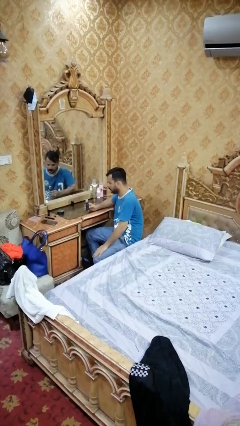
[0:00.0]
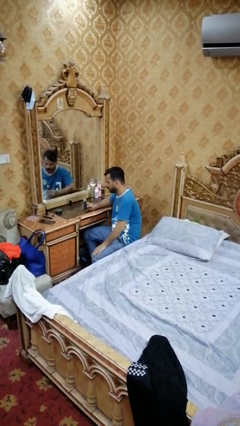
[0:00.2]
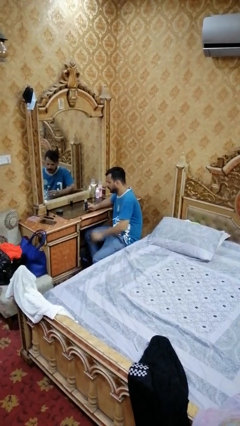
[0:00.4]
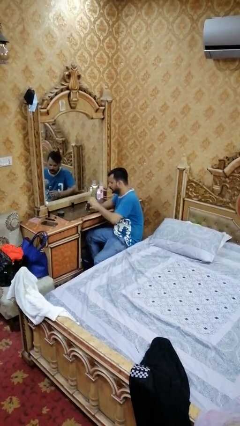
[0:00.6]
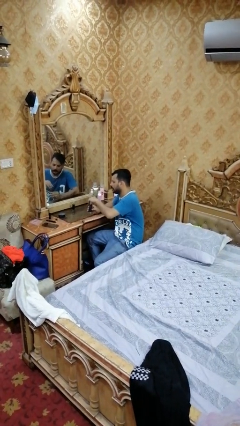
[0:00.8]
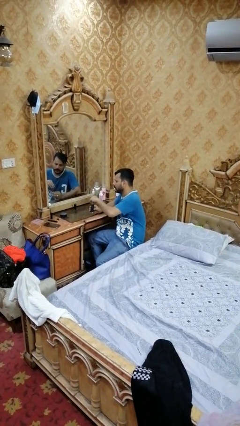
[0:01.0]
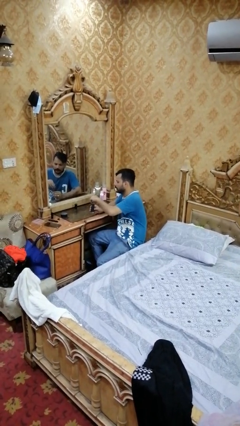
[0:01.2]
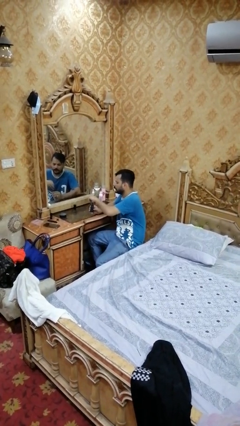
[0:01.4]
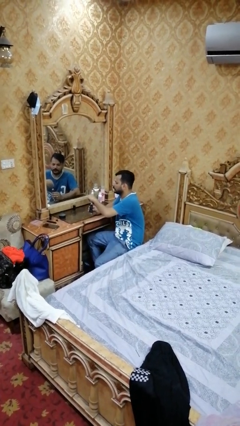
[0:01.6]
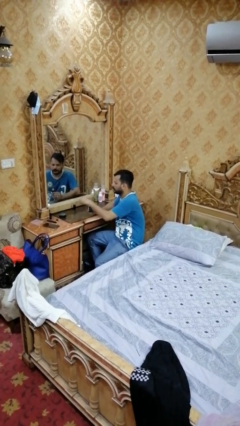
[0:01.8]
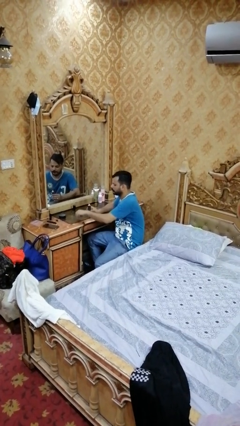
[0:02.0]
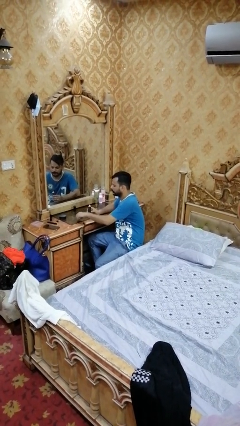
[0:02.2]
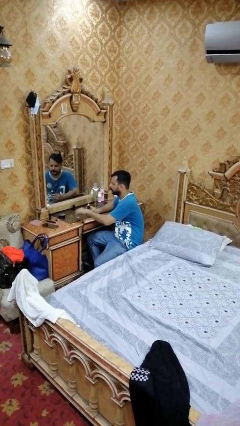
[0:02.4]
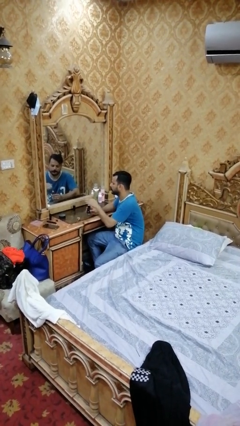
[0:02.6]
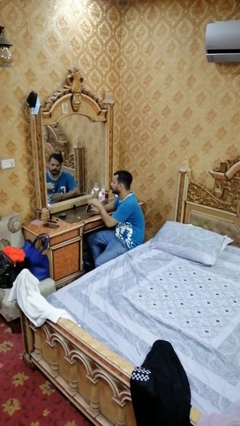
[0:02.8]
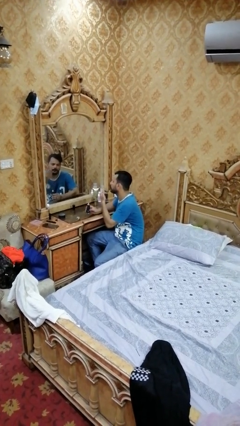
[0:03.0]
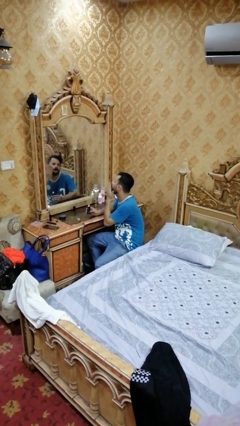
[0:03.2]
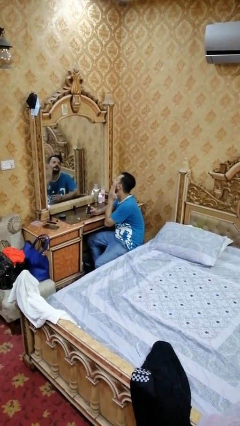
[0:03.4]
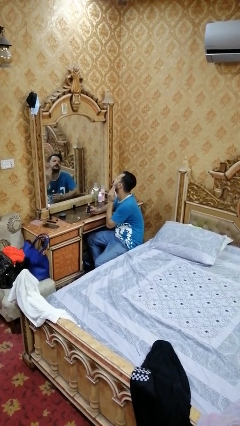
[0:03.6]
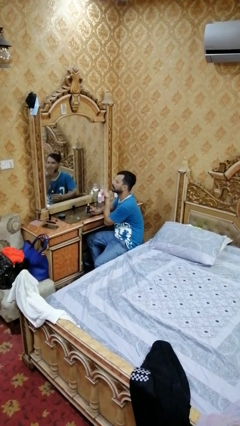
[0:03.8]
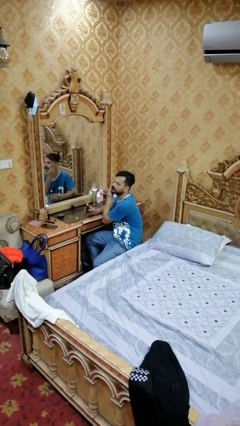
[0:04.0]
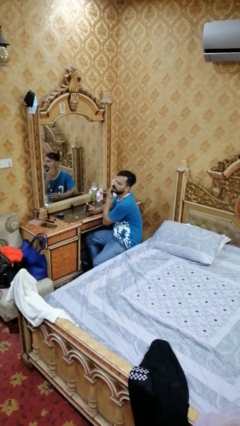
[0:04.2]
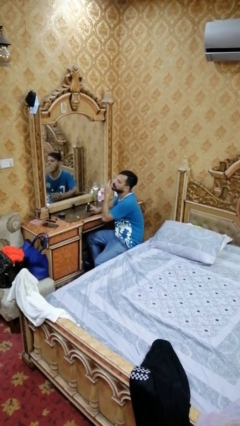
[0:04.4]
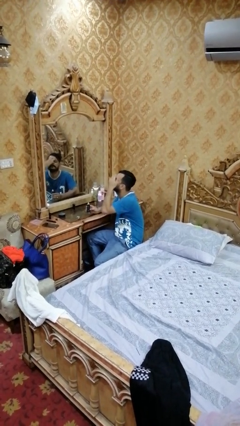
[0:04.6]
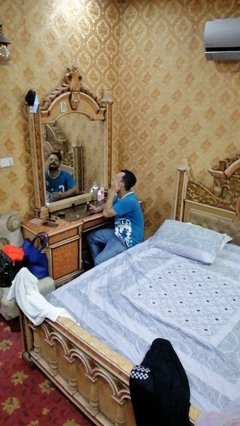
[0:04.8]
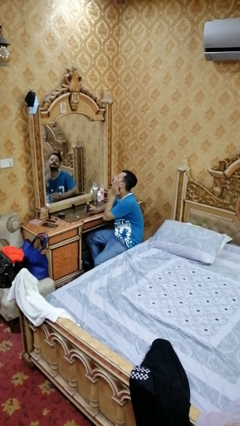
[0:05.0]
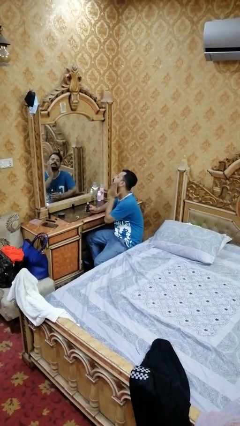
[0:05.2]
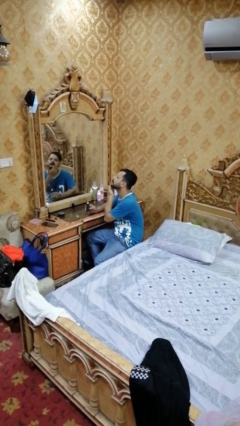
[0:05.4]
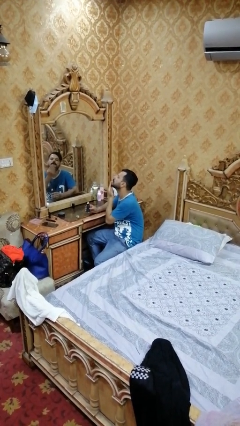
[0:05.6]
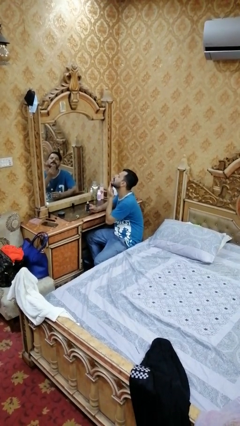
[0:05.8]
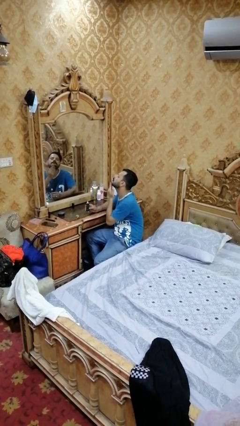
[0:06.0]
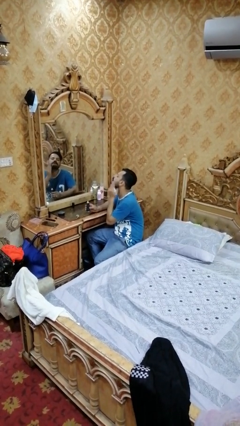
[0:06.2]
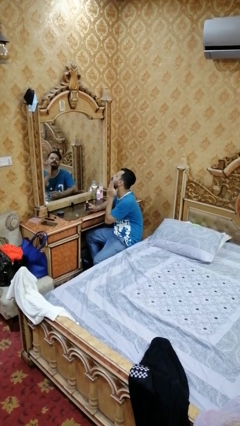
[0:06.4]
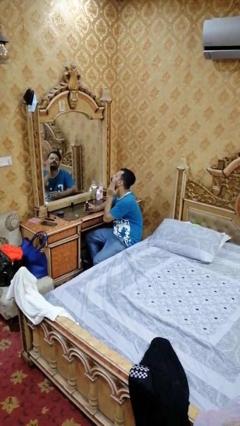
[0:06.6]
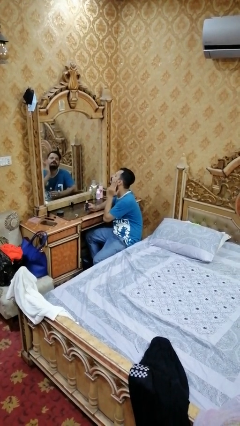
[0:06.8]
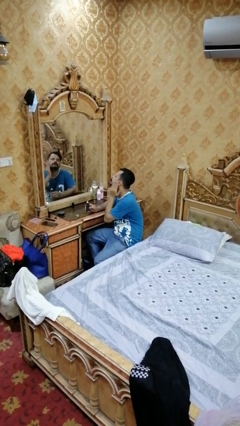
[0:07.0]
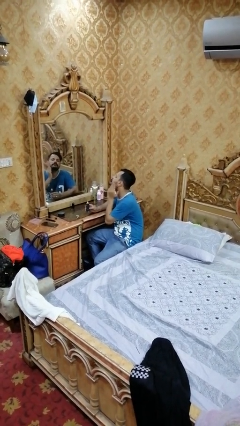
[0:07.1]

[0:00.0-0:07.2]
person applies foundation makeup

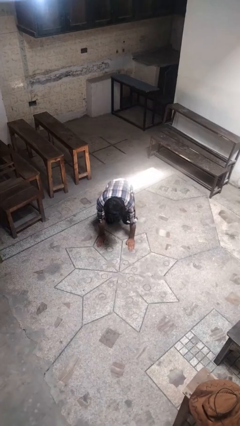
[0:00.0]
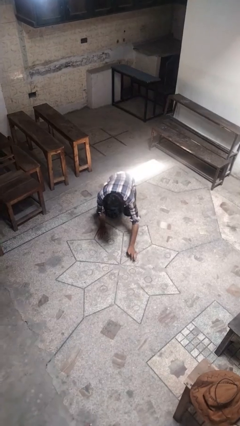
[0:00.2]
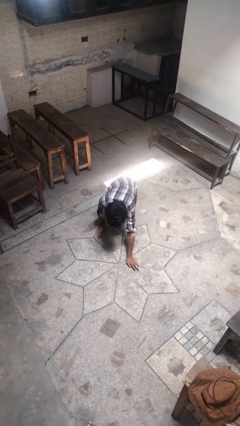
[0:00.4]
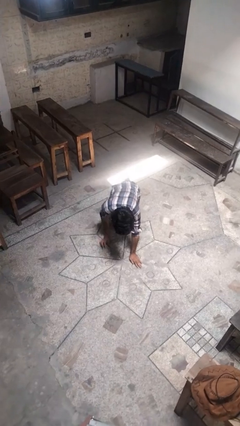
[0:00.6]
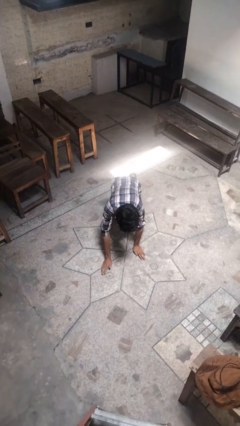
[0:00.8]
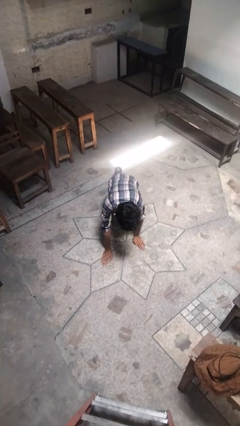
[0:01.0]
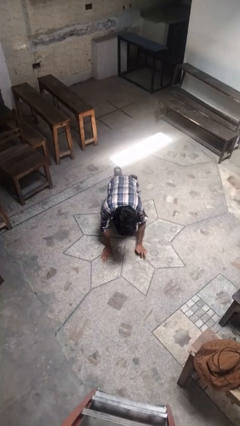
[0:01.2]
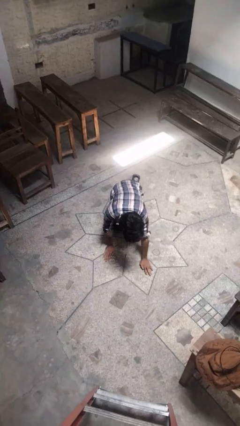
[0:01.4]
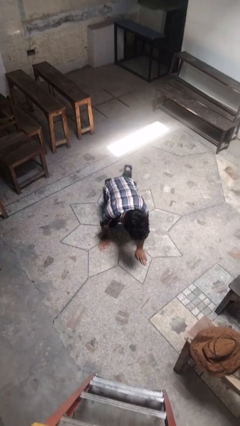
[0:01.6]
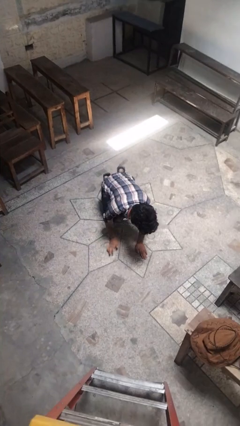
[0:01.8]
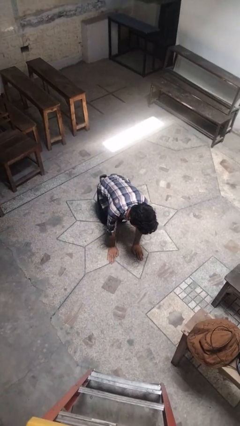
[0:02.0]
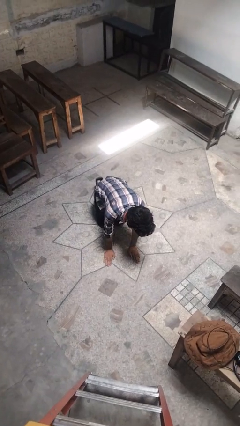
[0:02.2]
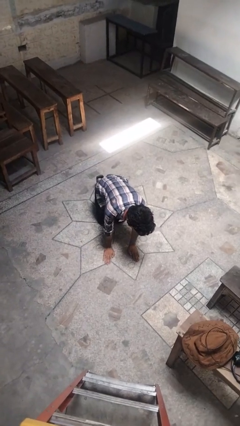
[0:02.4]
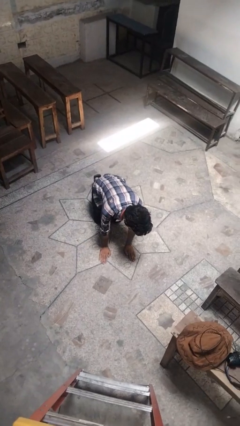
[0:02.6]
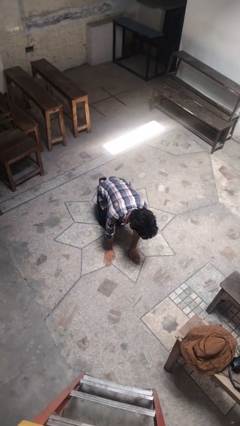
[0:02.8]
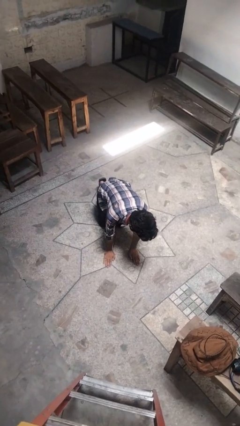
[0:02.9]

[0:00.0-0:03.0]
person crawls

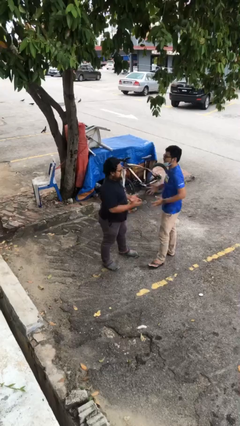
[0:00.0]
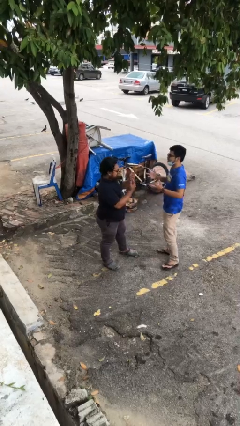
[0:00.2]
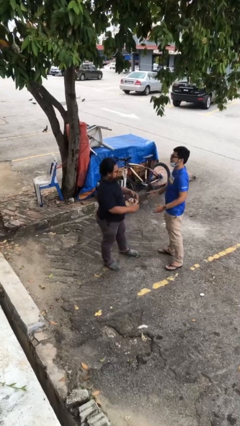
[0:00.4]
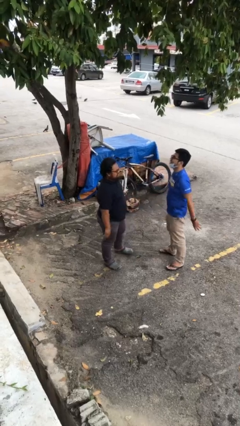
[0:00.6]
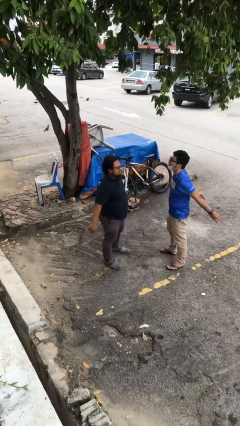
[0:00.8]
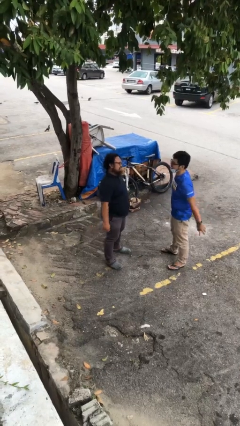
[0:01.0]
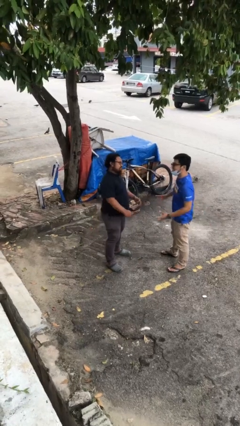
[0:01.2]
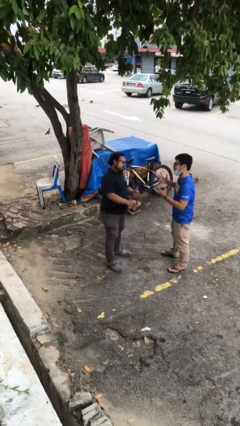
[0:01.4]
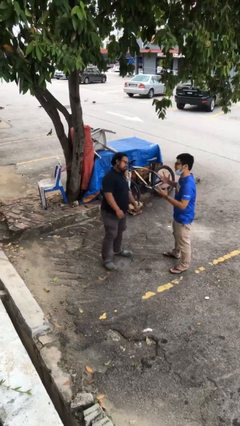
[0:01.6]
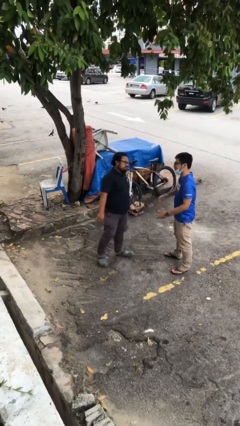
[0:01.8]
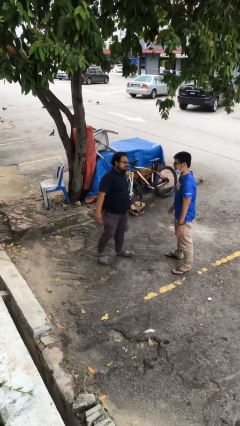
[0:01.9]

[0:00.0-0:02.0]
person talks to person

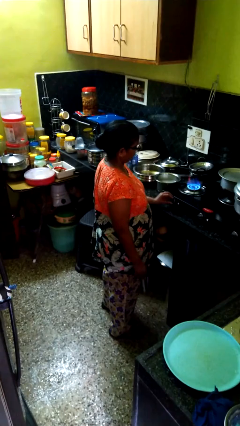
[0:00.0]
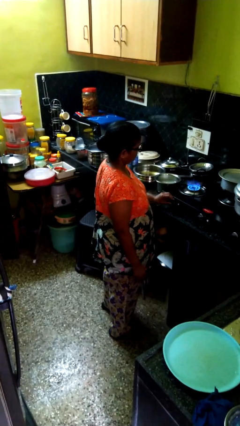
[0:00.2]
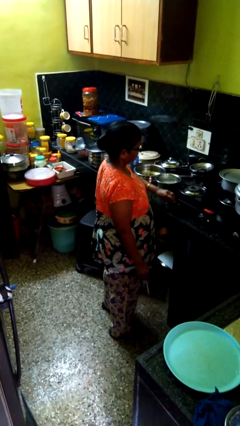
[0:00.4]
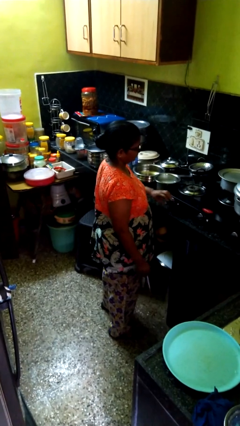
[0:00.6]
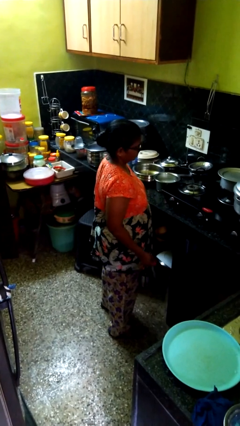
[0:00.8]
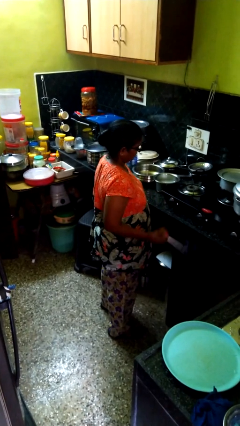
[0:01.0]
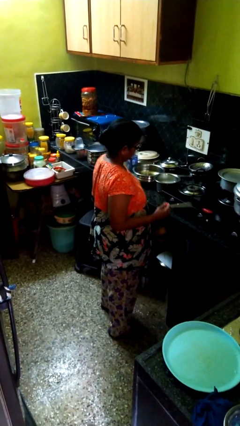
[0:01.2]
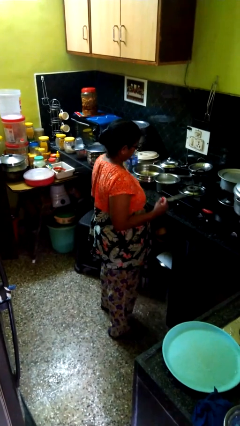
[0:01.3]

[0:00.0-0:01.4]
person turns off stovetop

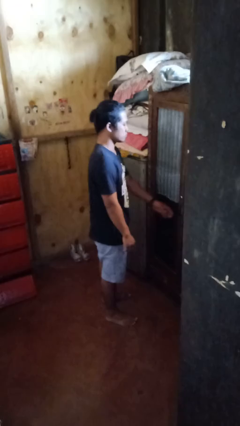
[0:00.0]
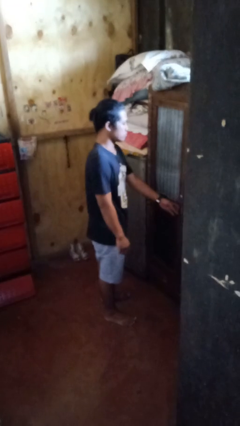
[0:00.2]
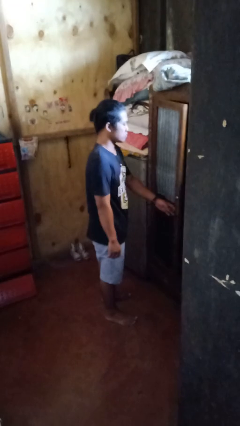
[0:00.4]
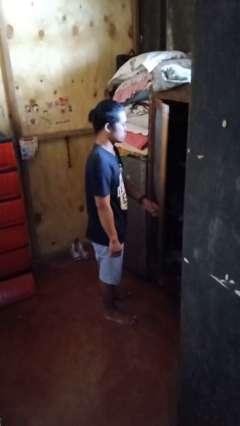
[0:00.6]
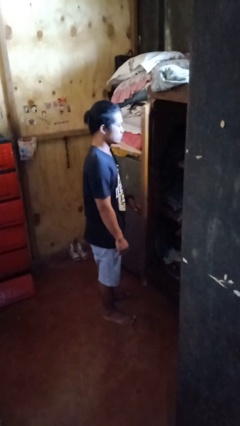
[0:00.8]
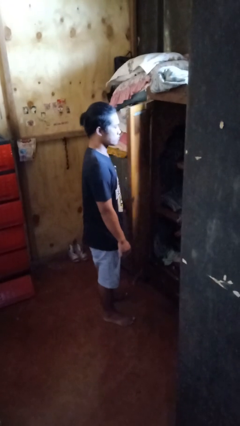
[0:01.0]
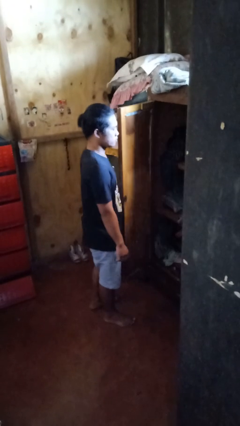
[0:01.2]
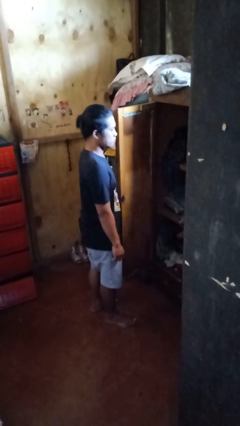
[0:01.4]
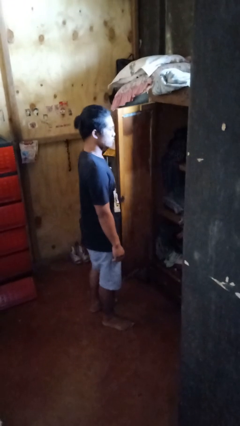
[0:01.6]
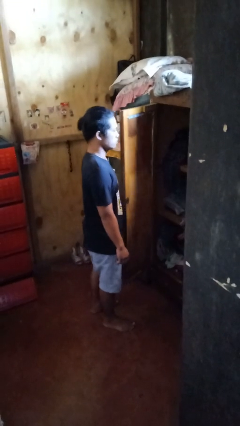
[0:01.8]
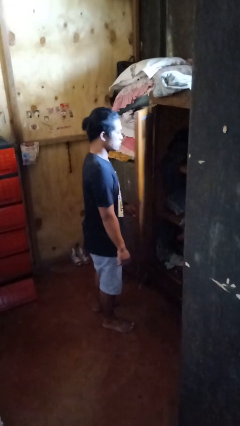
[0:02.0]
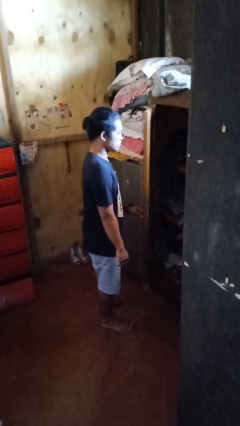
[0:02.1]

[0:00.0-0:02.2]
person opens closet door

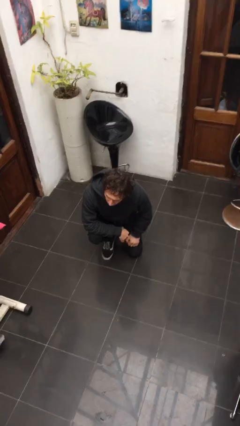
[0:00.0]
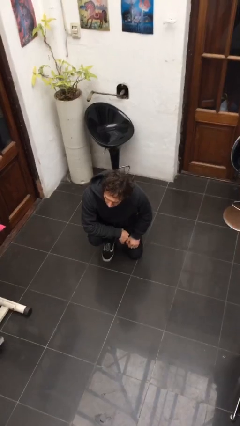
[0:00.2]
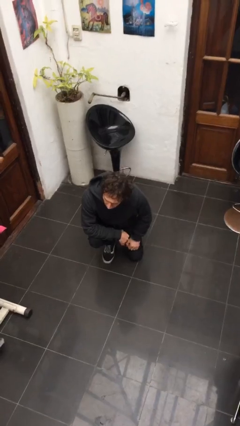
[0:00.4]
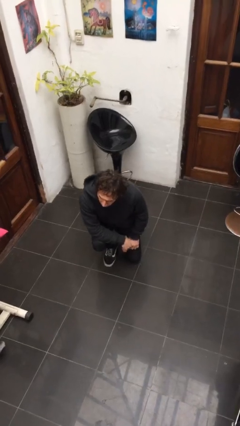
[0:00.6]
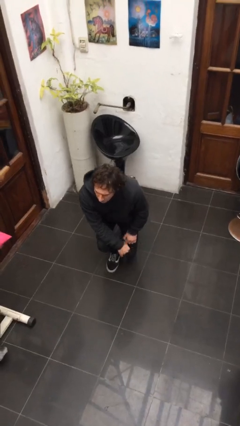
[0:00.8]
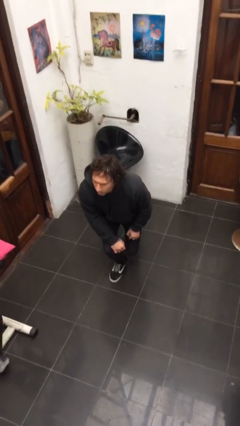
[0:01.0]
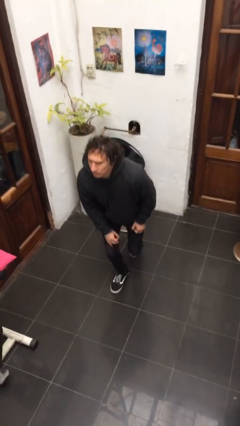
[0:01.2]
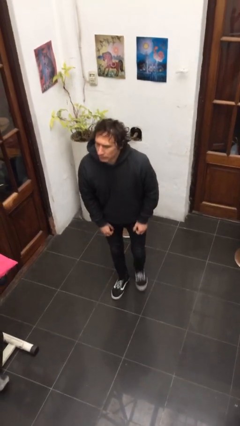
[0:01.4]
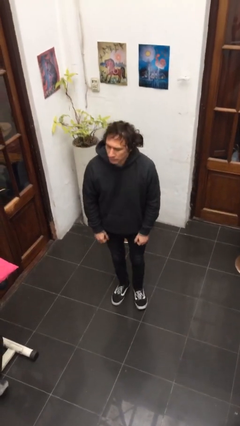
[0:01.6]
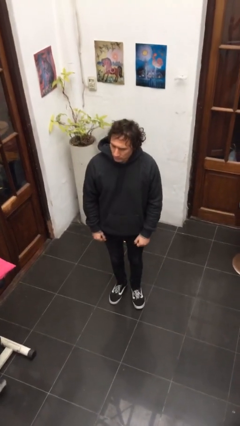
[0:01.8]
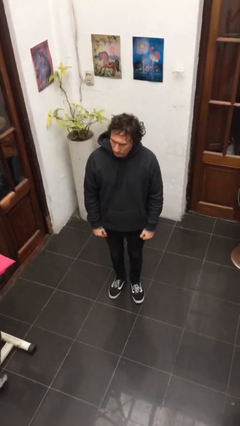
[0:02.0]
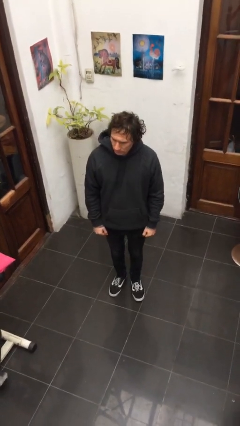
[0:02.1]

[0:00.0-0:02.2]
person stands up from floor
